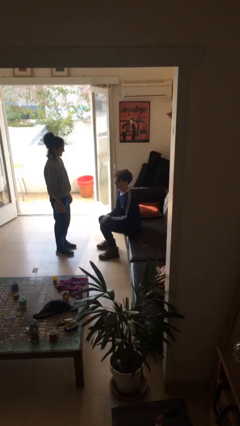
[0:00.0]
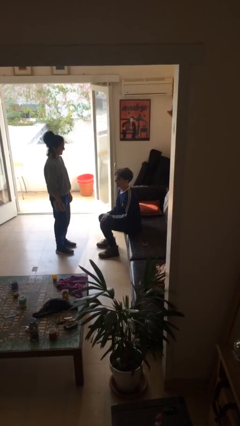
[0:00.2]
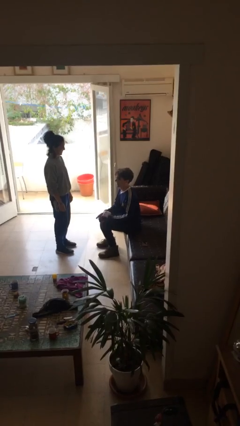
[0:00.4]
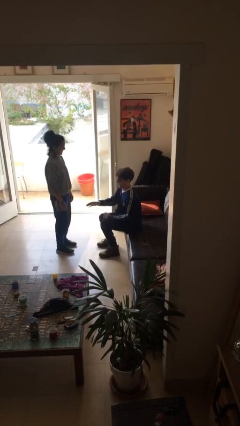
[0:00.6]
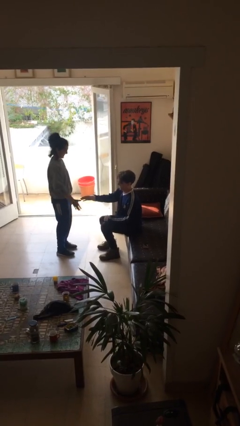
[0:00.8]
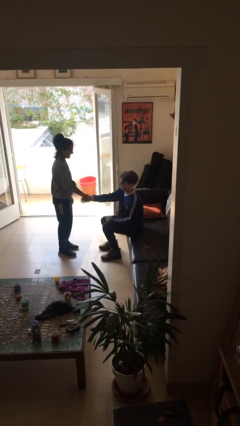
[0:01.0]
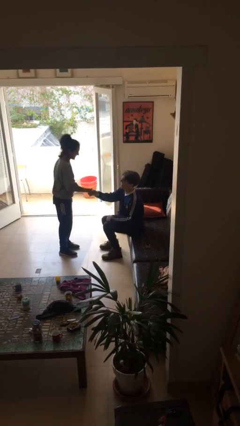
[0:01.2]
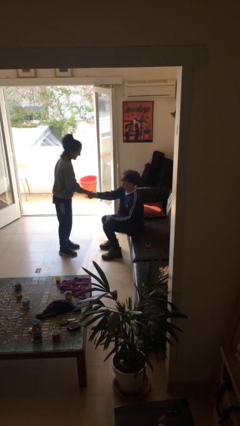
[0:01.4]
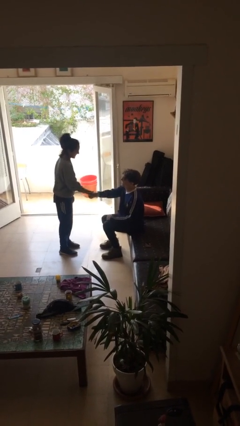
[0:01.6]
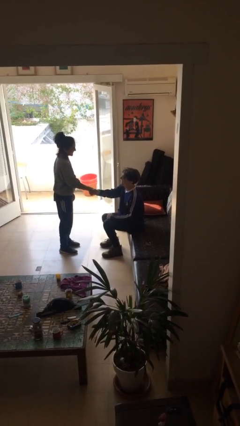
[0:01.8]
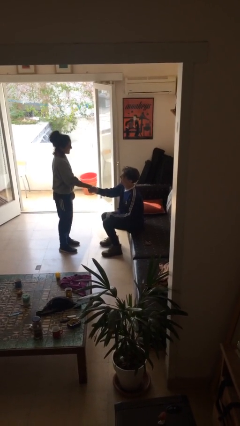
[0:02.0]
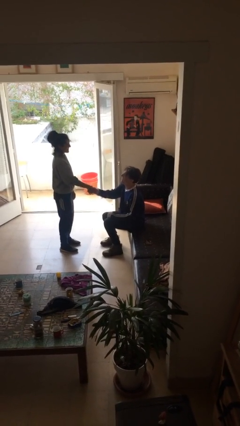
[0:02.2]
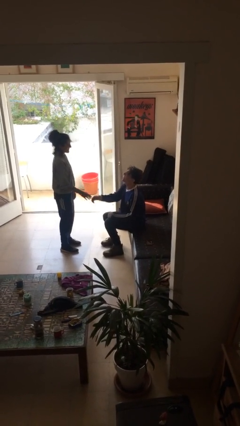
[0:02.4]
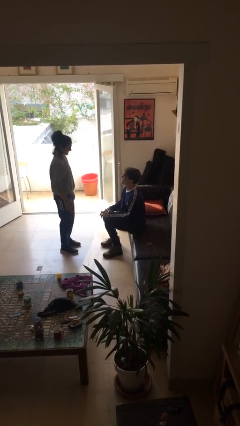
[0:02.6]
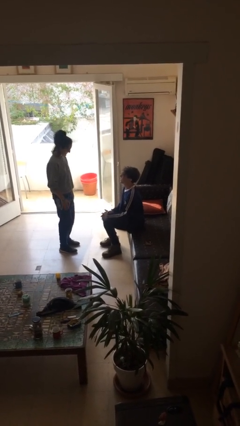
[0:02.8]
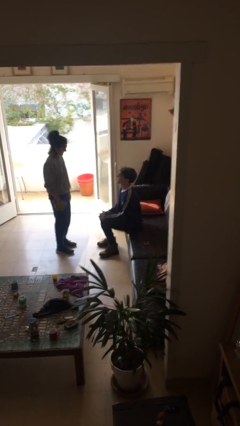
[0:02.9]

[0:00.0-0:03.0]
person shakes hand

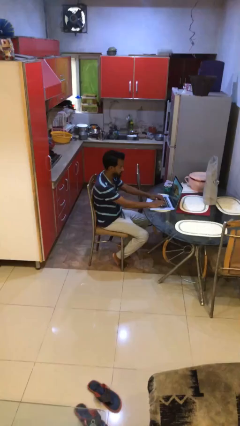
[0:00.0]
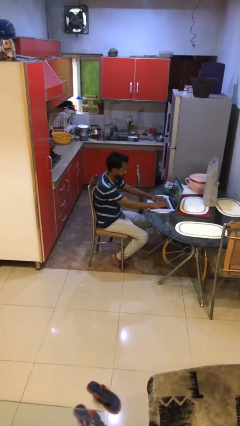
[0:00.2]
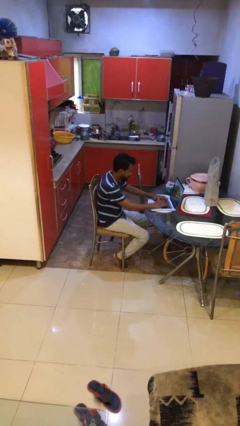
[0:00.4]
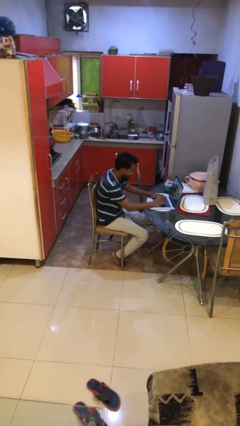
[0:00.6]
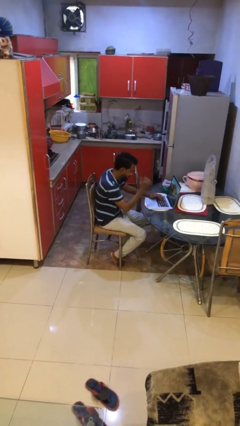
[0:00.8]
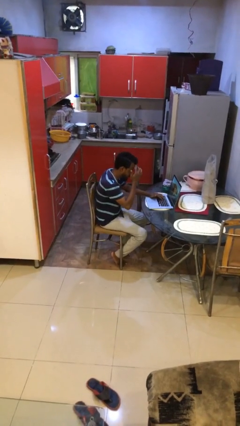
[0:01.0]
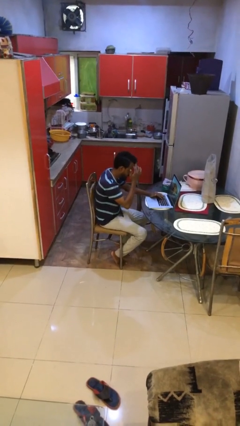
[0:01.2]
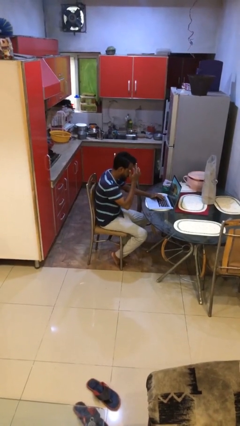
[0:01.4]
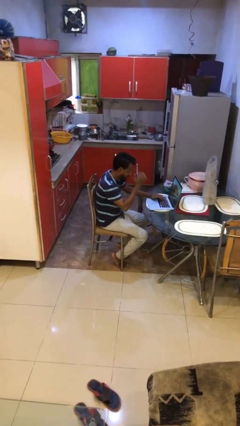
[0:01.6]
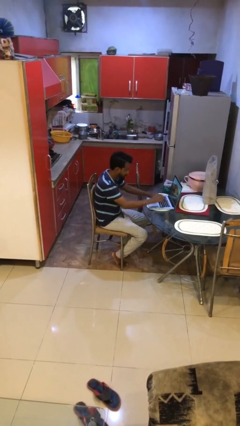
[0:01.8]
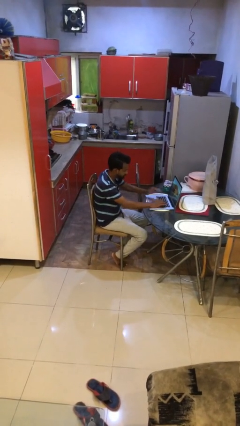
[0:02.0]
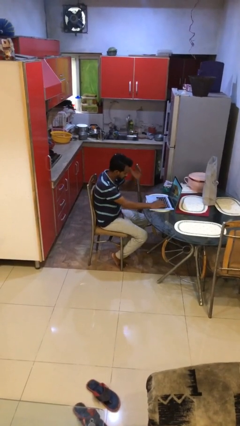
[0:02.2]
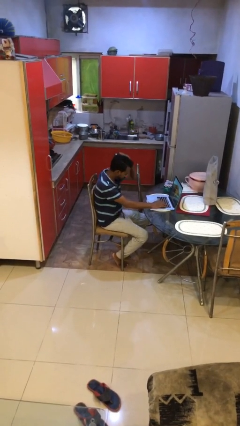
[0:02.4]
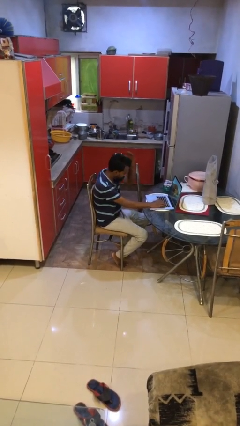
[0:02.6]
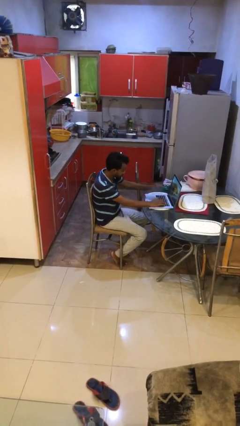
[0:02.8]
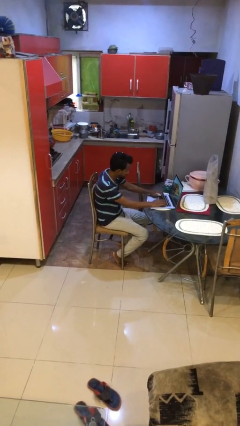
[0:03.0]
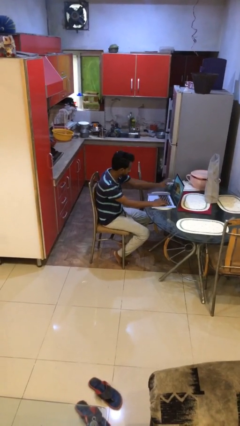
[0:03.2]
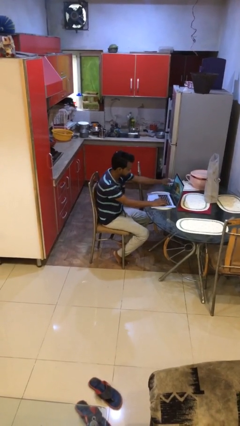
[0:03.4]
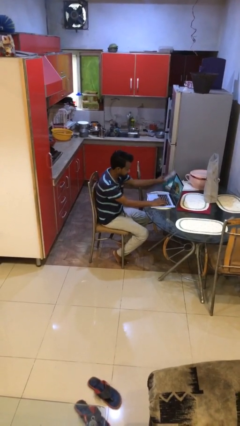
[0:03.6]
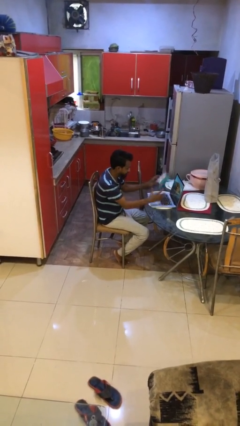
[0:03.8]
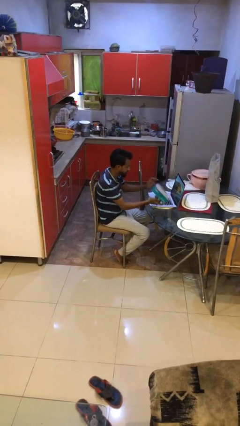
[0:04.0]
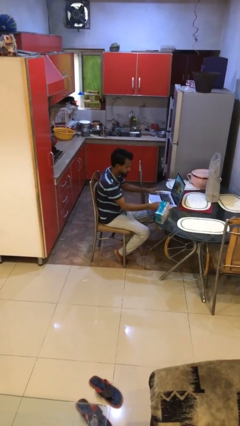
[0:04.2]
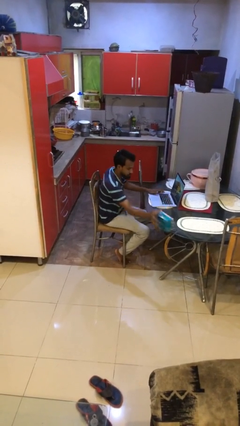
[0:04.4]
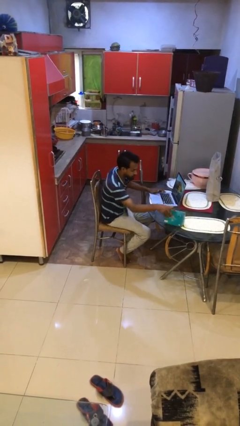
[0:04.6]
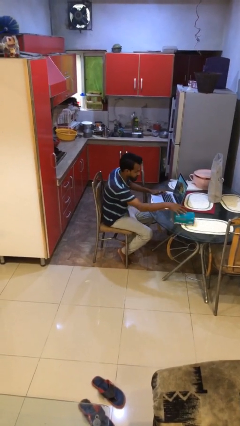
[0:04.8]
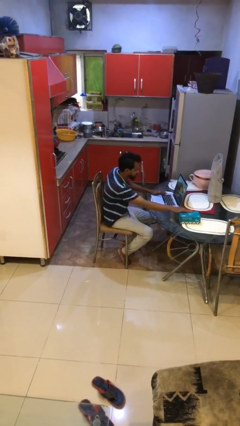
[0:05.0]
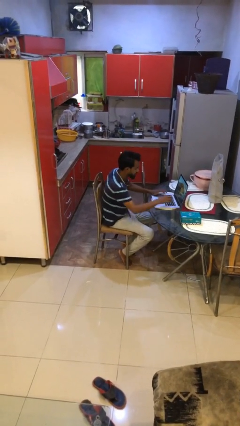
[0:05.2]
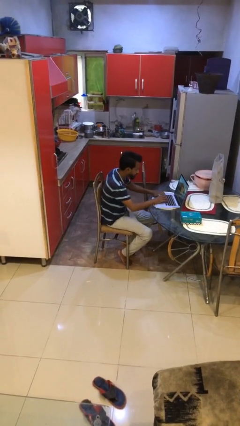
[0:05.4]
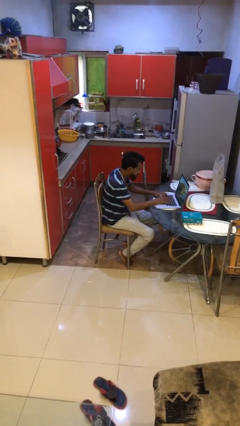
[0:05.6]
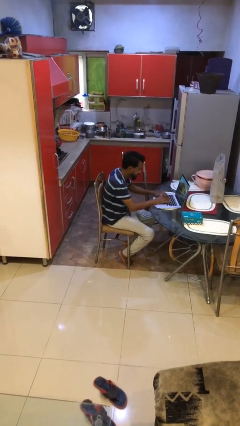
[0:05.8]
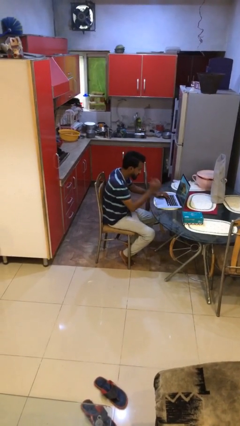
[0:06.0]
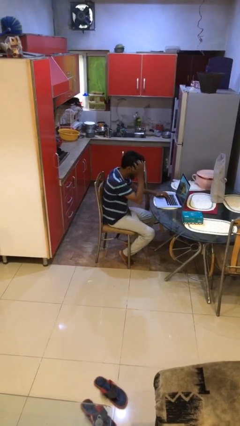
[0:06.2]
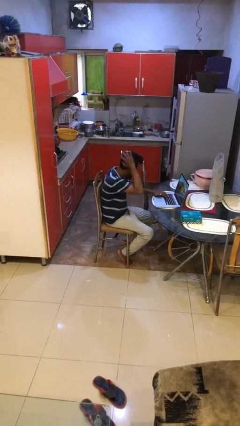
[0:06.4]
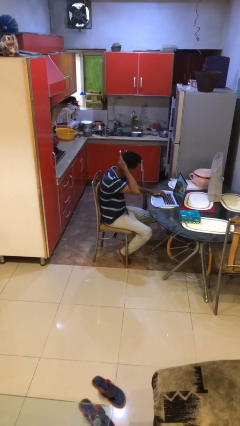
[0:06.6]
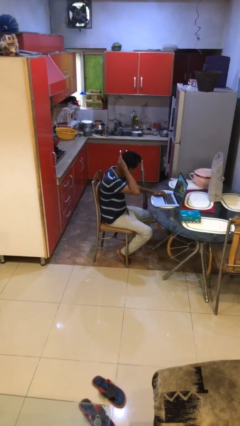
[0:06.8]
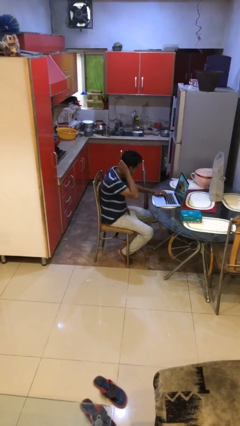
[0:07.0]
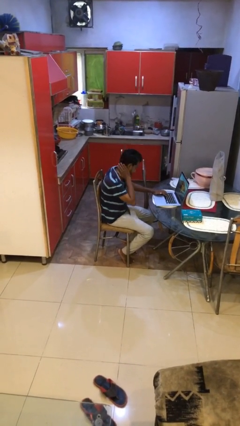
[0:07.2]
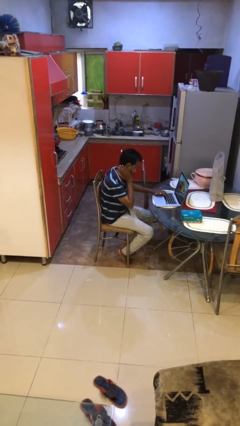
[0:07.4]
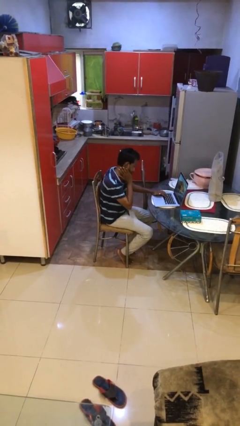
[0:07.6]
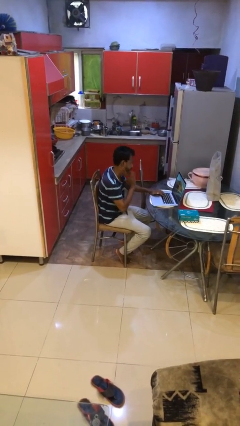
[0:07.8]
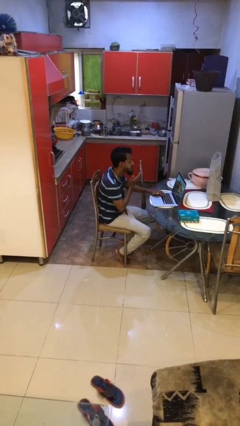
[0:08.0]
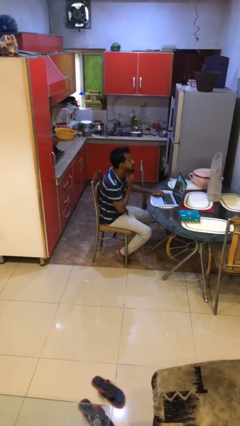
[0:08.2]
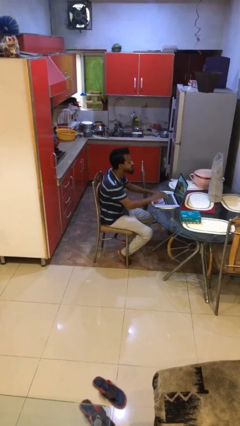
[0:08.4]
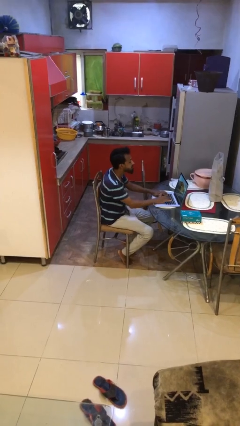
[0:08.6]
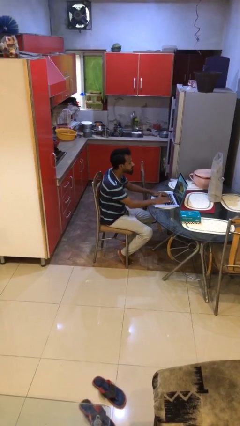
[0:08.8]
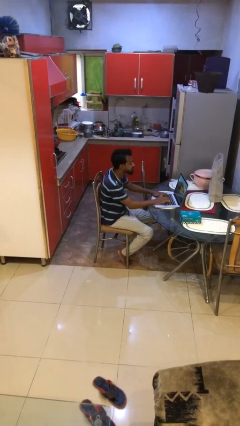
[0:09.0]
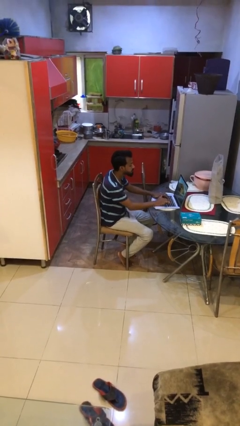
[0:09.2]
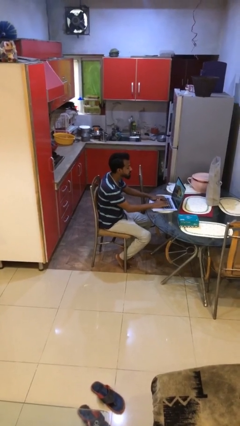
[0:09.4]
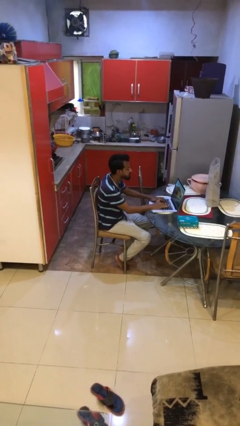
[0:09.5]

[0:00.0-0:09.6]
person interacts with laptop

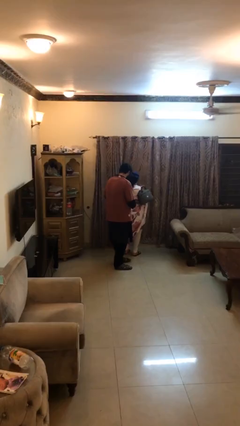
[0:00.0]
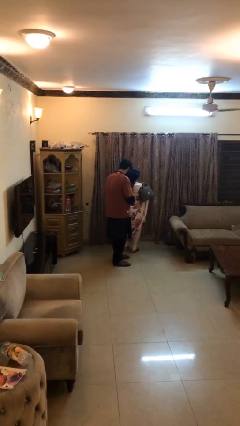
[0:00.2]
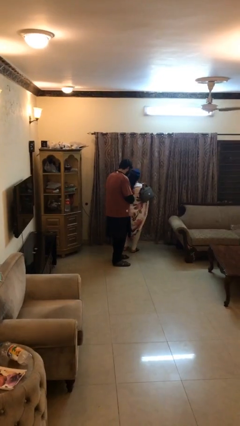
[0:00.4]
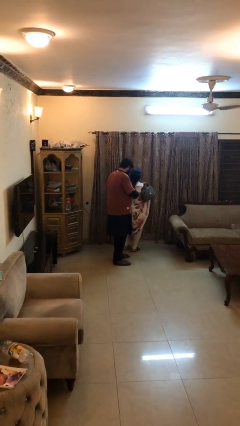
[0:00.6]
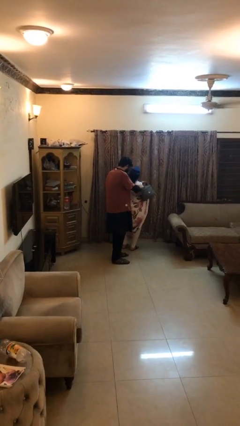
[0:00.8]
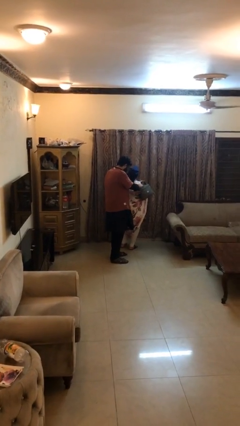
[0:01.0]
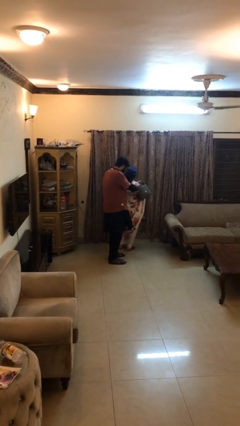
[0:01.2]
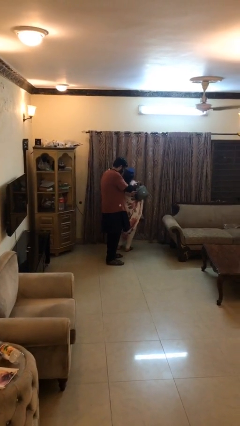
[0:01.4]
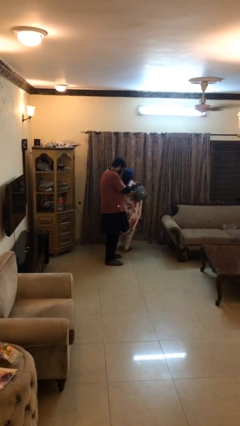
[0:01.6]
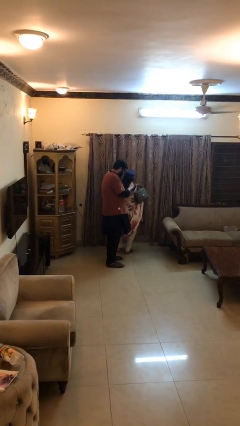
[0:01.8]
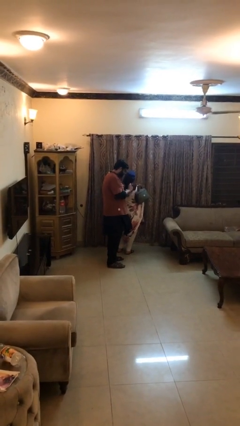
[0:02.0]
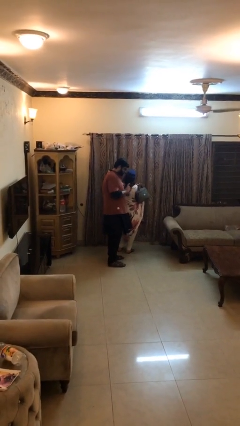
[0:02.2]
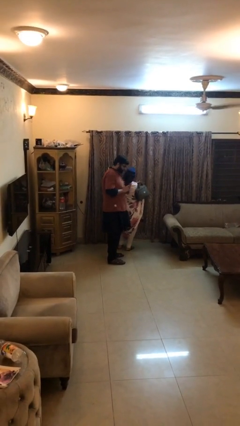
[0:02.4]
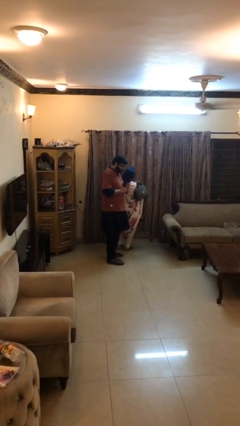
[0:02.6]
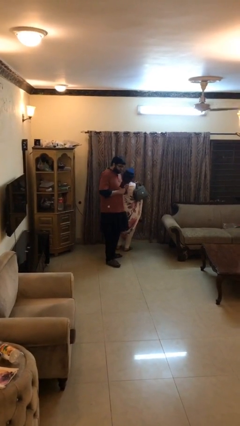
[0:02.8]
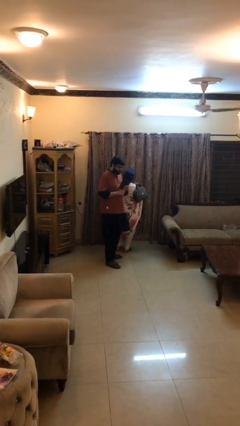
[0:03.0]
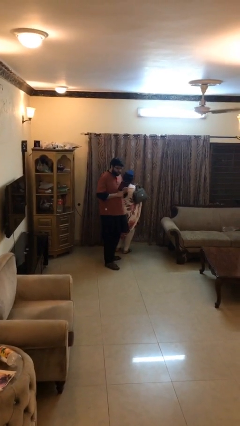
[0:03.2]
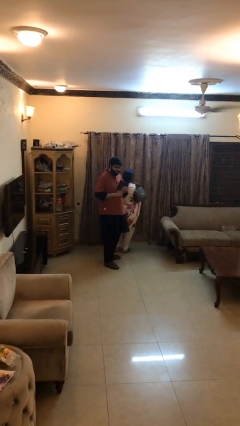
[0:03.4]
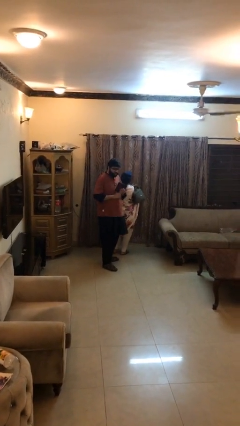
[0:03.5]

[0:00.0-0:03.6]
person steals object from person

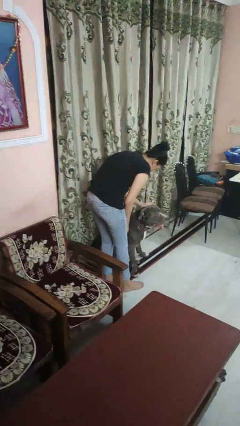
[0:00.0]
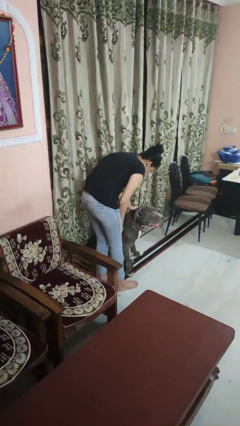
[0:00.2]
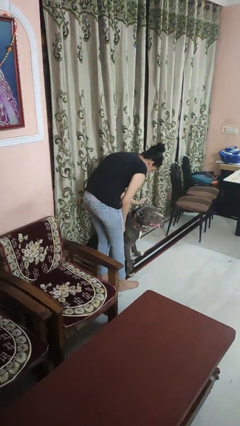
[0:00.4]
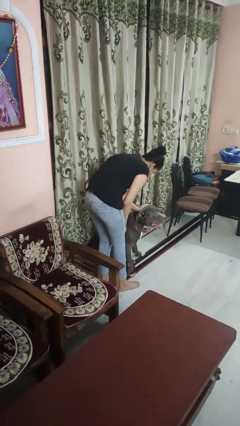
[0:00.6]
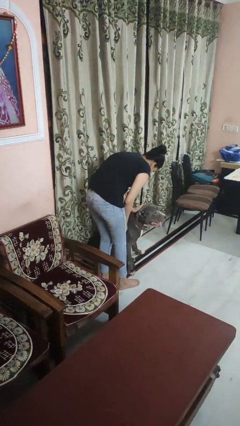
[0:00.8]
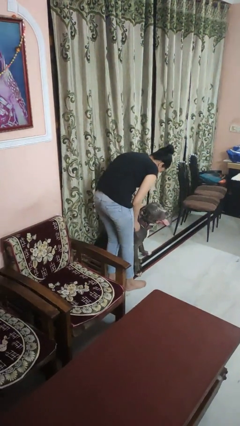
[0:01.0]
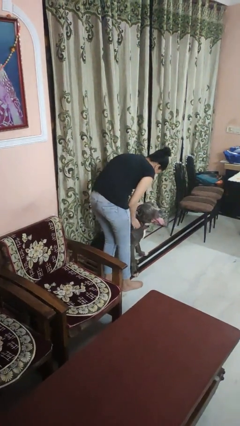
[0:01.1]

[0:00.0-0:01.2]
person pets dog

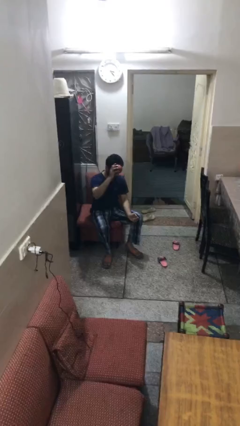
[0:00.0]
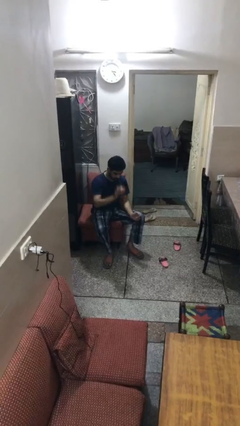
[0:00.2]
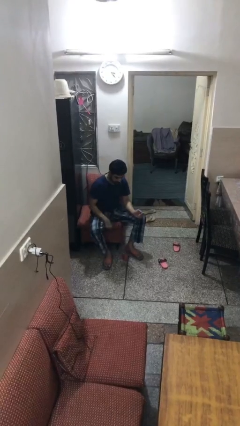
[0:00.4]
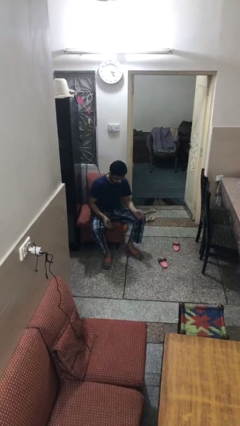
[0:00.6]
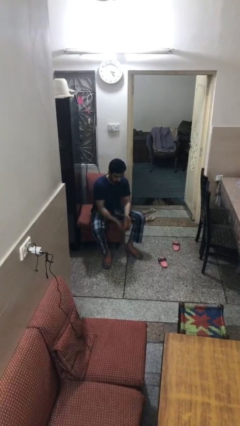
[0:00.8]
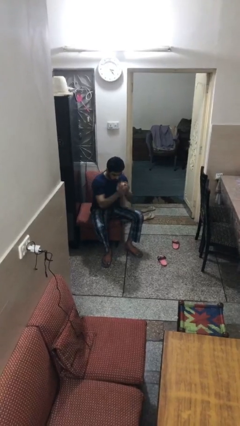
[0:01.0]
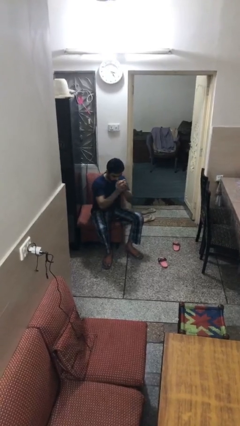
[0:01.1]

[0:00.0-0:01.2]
person bounces ball on floor
